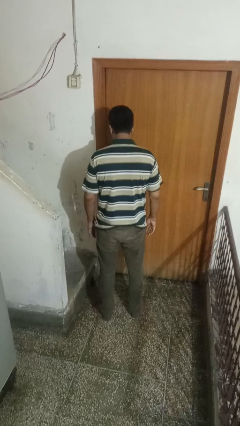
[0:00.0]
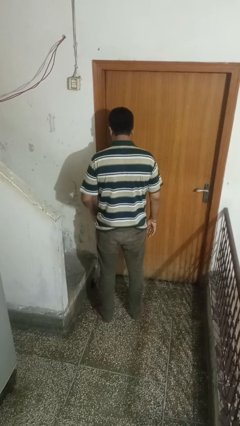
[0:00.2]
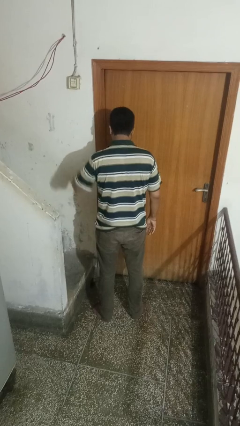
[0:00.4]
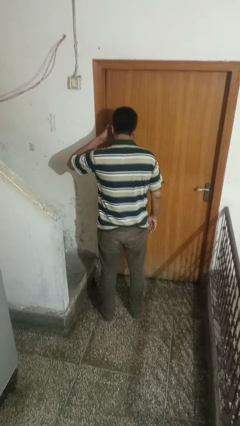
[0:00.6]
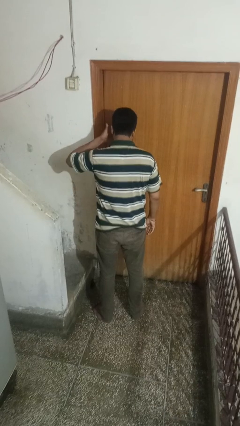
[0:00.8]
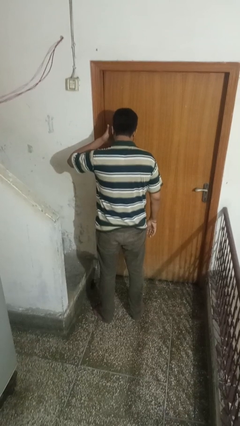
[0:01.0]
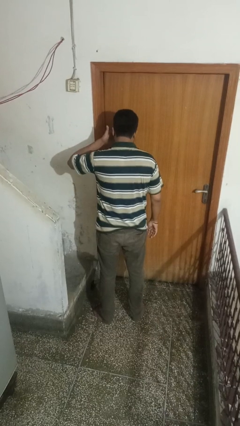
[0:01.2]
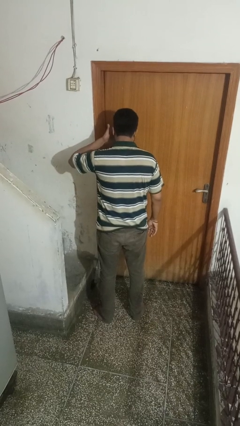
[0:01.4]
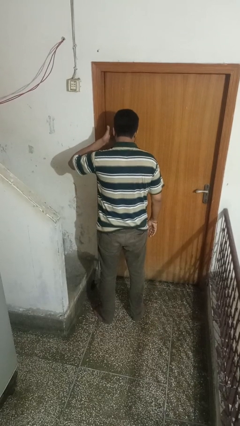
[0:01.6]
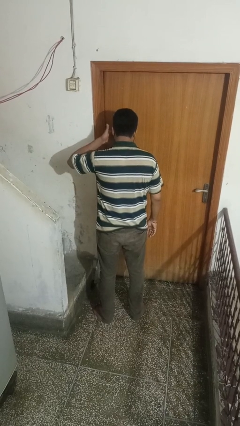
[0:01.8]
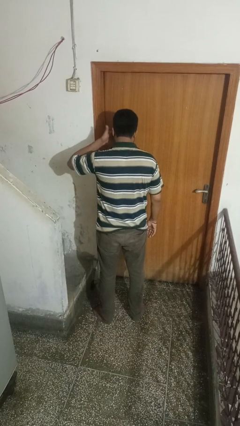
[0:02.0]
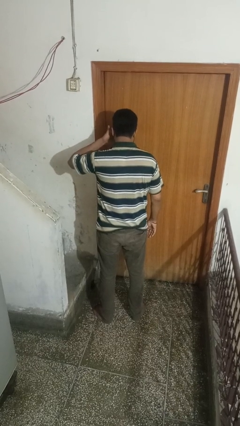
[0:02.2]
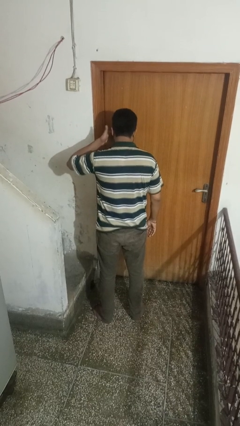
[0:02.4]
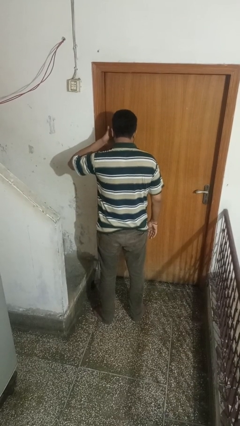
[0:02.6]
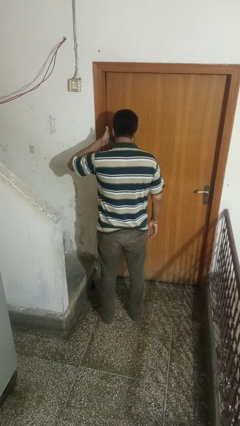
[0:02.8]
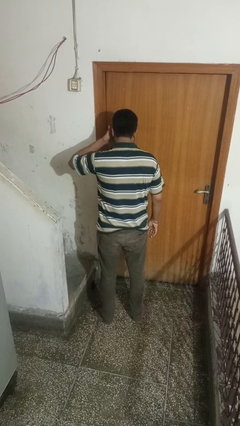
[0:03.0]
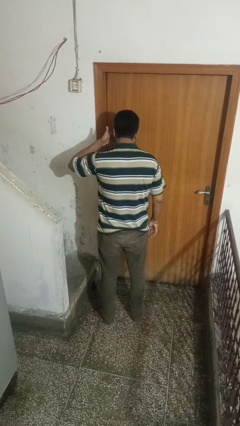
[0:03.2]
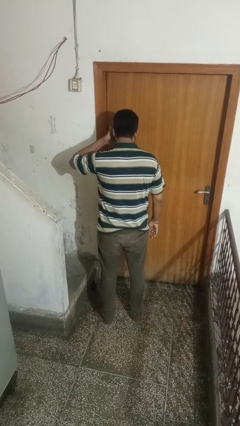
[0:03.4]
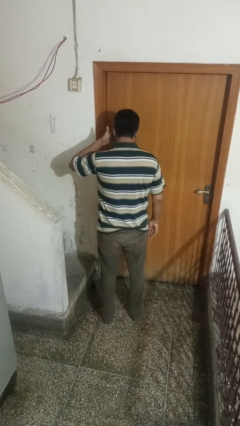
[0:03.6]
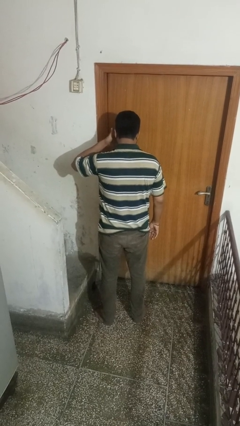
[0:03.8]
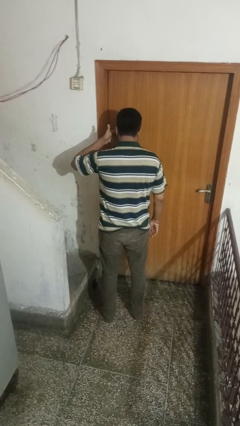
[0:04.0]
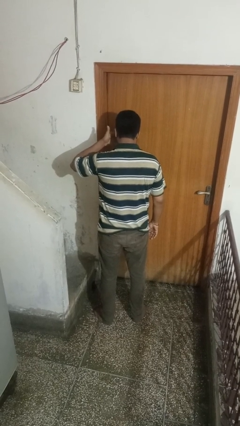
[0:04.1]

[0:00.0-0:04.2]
person rubs eyes

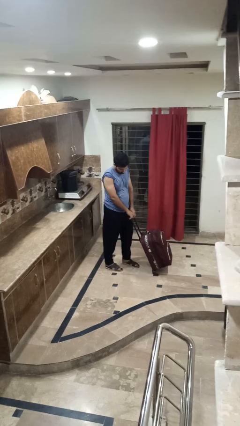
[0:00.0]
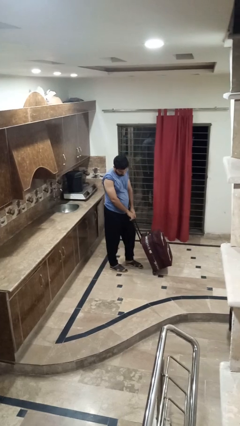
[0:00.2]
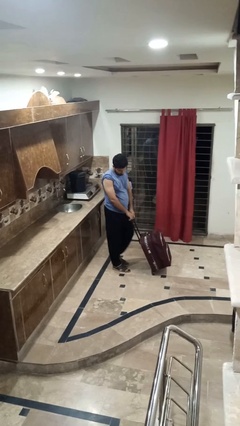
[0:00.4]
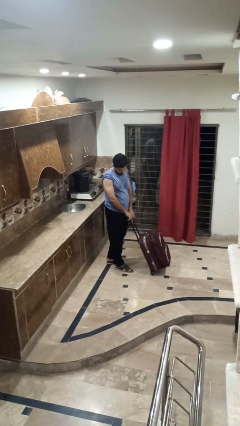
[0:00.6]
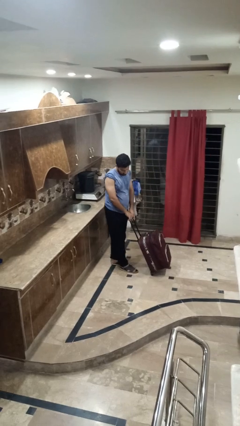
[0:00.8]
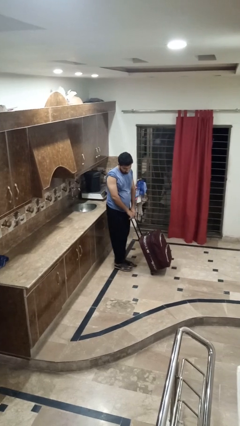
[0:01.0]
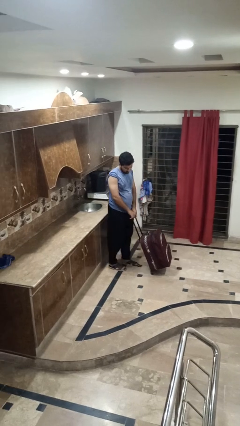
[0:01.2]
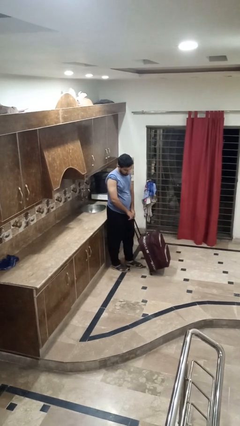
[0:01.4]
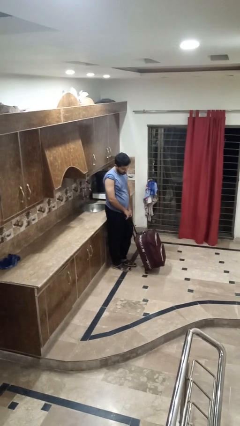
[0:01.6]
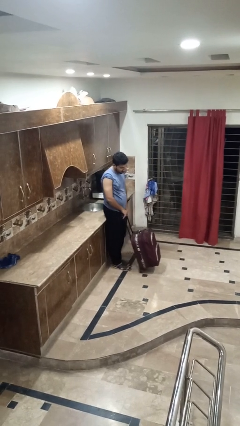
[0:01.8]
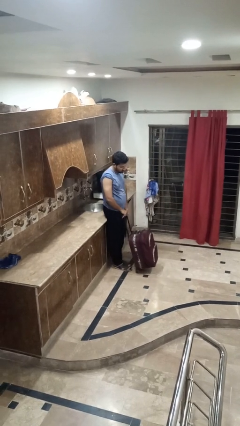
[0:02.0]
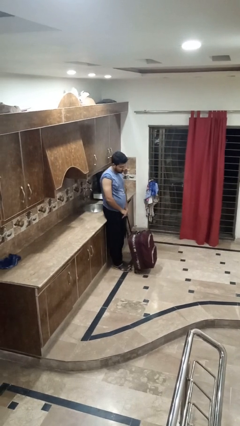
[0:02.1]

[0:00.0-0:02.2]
person pulls wheeled cart

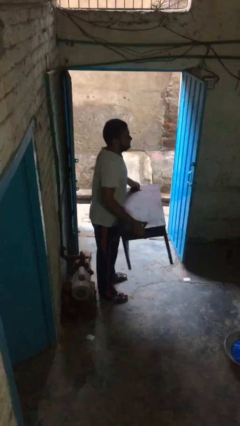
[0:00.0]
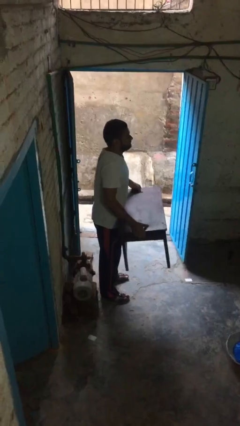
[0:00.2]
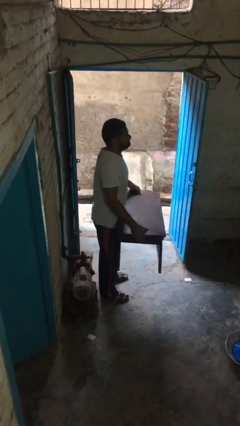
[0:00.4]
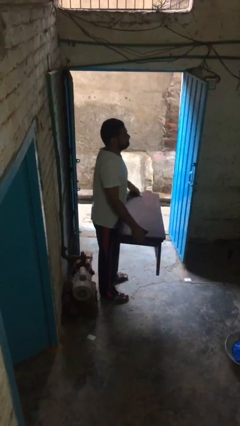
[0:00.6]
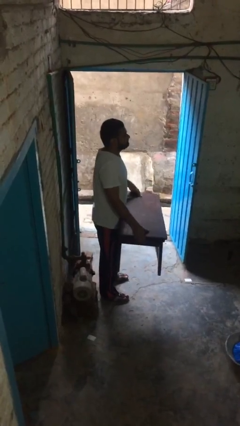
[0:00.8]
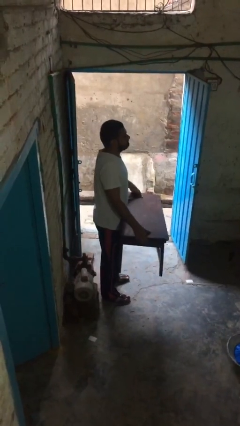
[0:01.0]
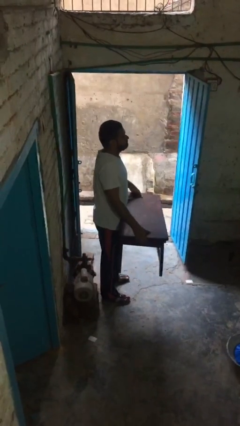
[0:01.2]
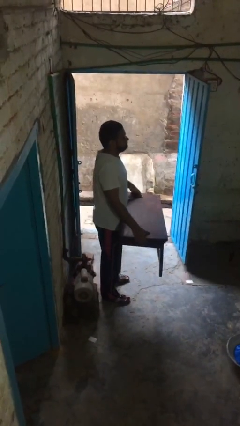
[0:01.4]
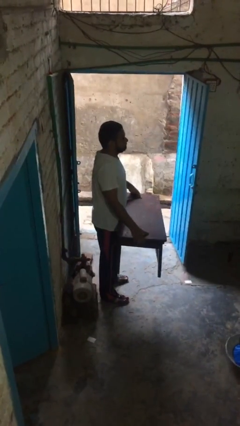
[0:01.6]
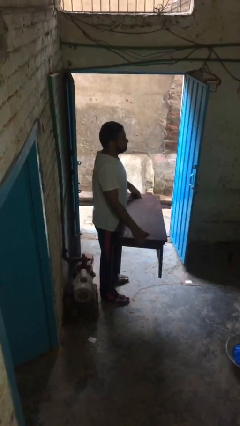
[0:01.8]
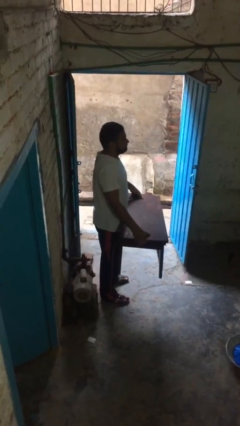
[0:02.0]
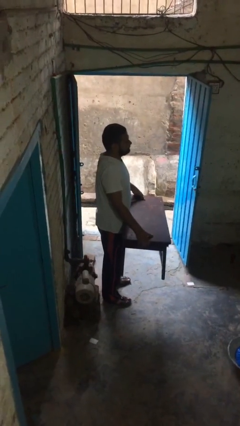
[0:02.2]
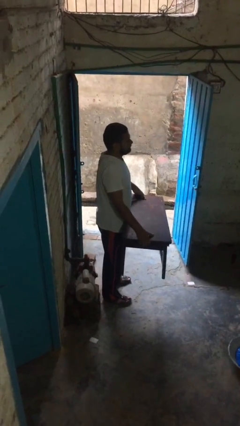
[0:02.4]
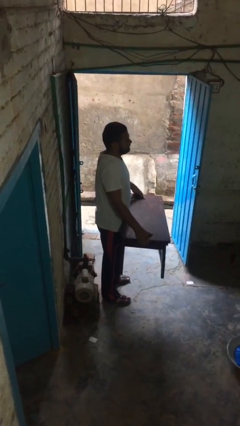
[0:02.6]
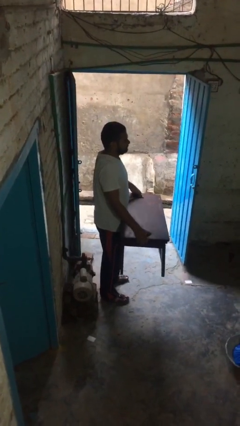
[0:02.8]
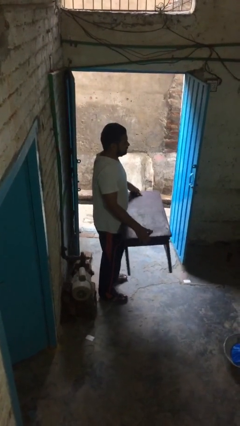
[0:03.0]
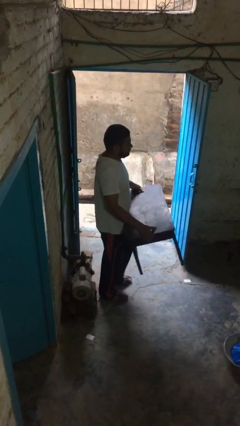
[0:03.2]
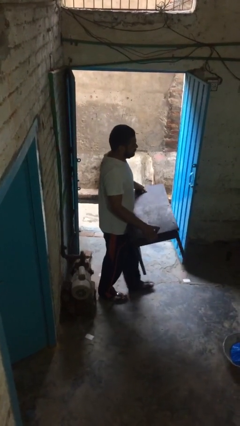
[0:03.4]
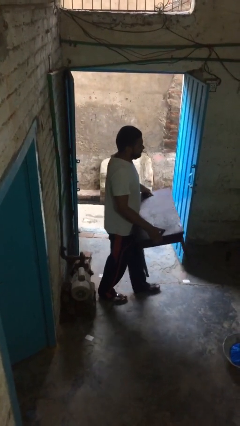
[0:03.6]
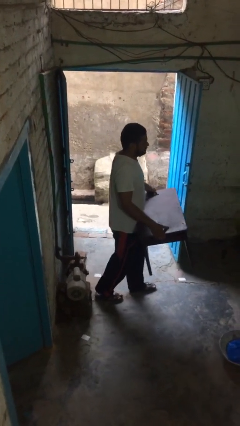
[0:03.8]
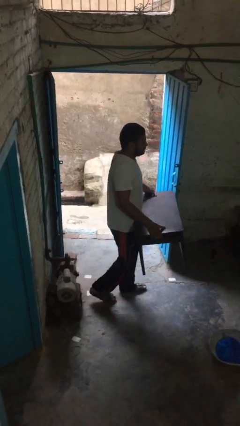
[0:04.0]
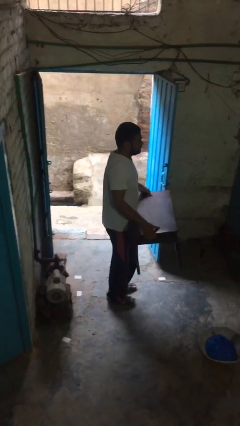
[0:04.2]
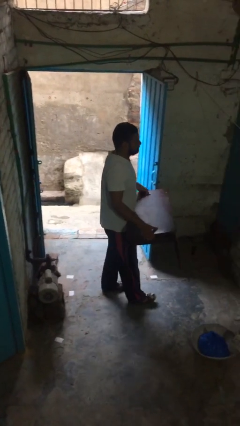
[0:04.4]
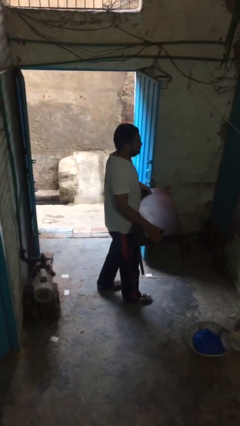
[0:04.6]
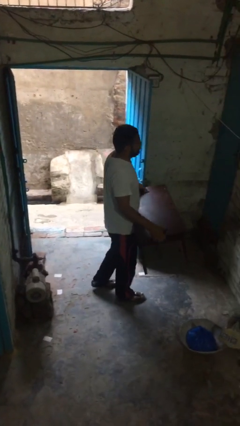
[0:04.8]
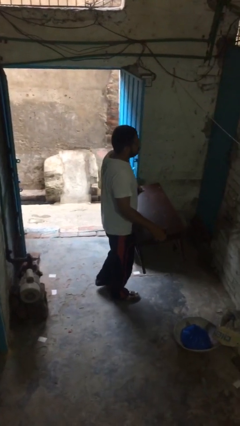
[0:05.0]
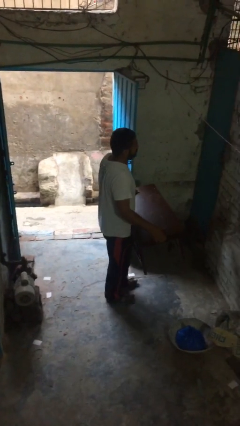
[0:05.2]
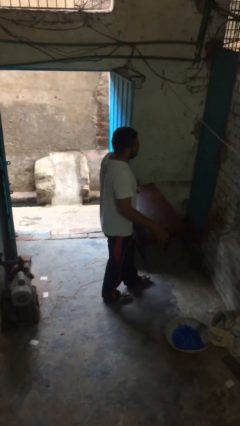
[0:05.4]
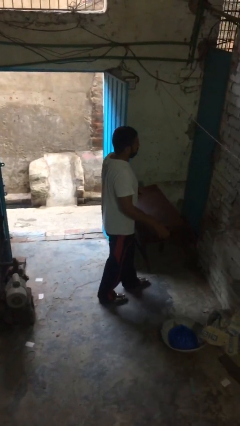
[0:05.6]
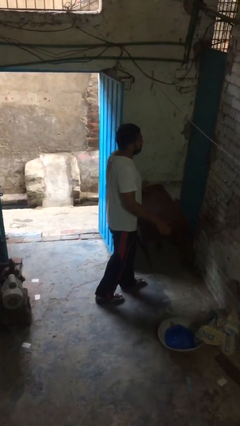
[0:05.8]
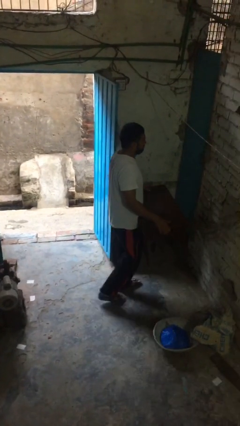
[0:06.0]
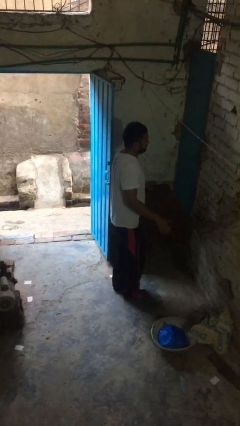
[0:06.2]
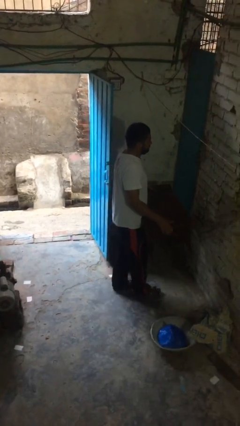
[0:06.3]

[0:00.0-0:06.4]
person carries heavy object

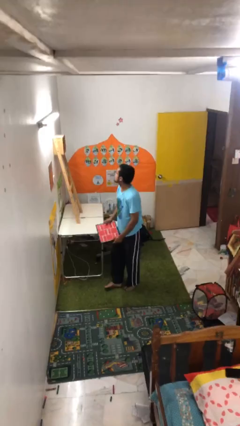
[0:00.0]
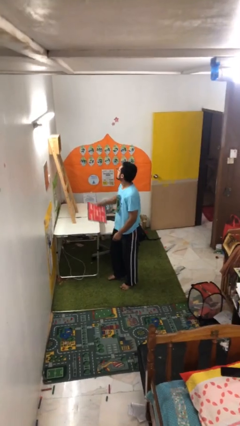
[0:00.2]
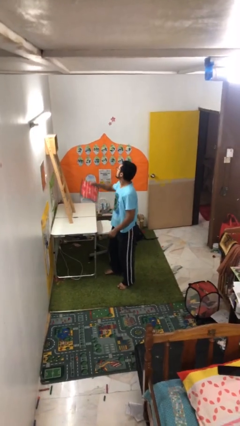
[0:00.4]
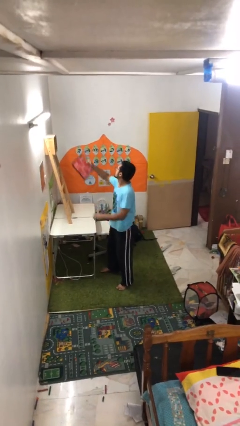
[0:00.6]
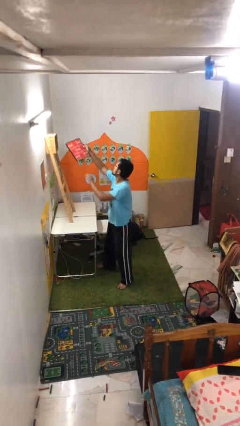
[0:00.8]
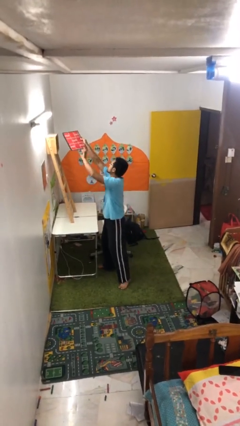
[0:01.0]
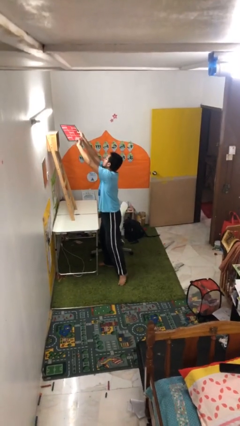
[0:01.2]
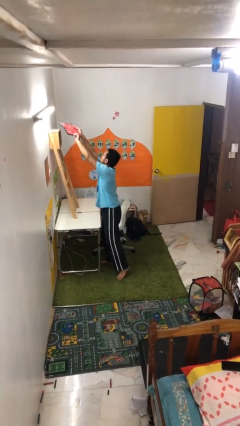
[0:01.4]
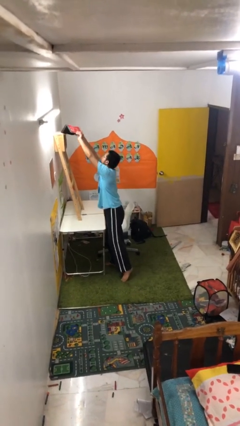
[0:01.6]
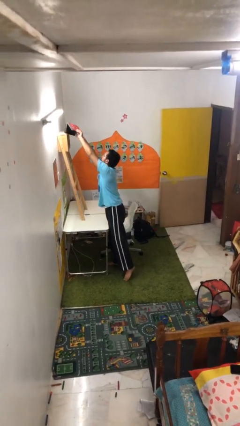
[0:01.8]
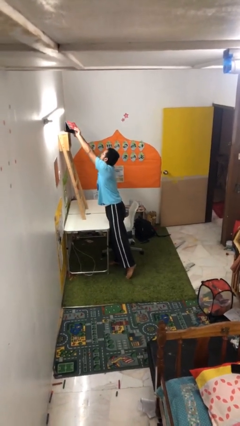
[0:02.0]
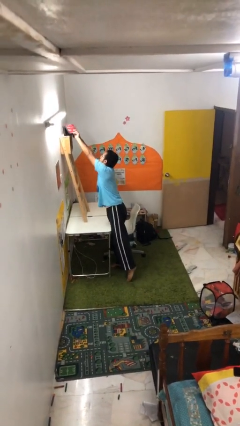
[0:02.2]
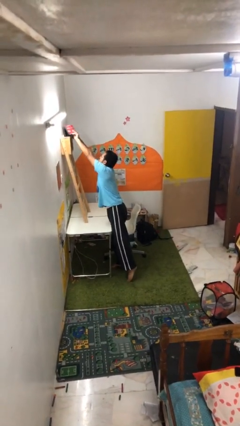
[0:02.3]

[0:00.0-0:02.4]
person puts down object on shelf

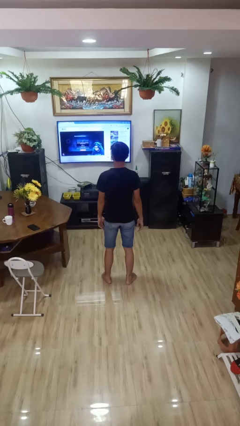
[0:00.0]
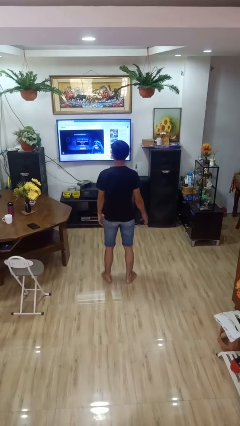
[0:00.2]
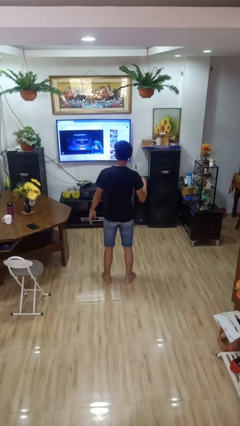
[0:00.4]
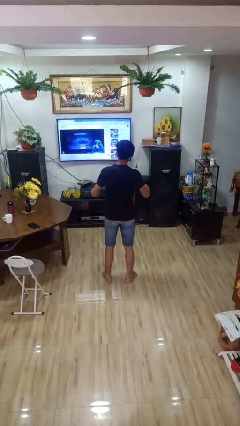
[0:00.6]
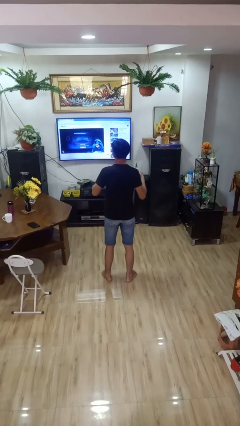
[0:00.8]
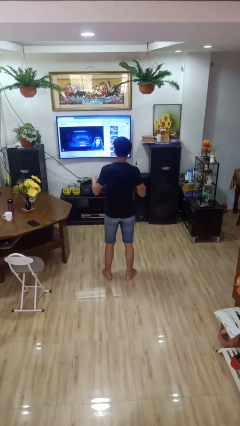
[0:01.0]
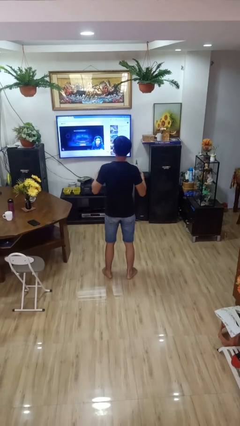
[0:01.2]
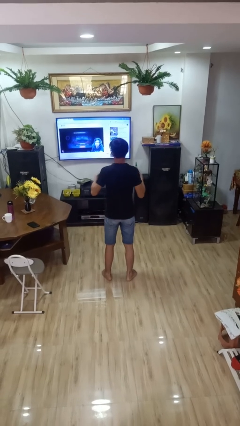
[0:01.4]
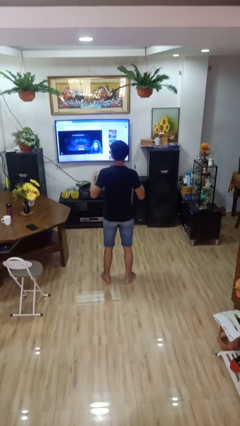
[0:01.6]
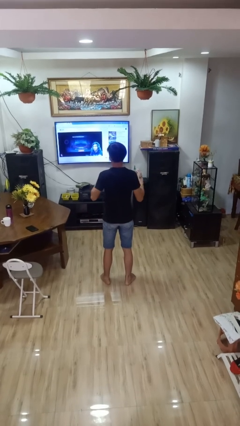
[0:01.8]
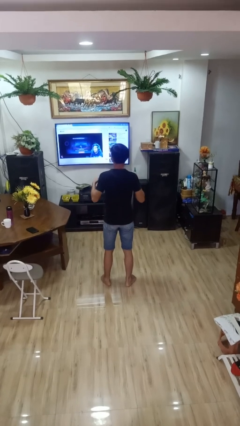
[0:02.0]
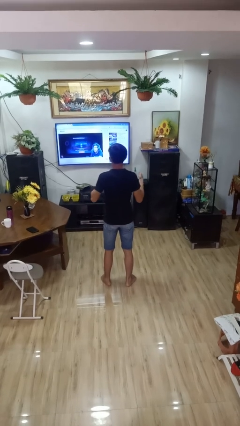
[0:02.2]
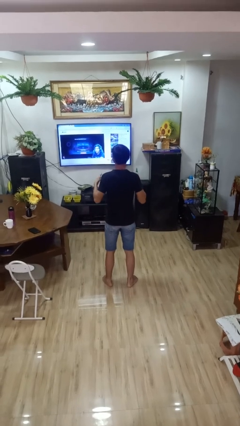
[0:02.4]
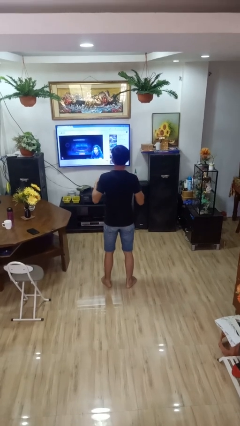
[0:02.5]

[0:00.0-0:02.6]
person drums on chest
